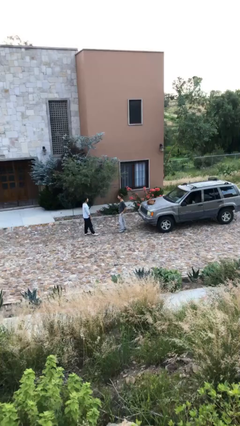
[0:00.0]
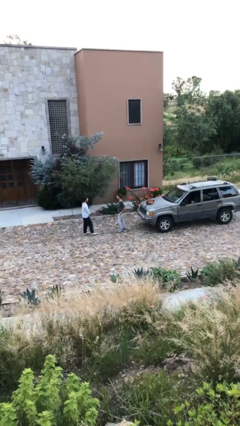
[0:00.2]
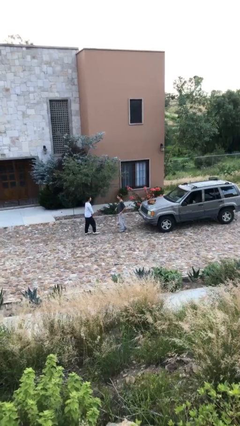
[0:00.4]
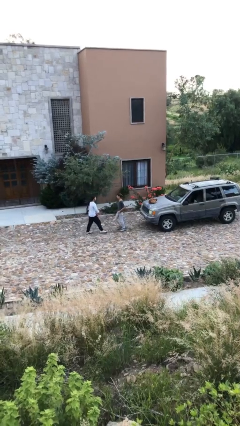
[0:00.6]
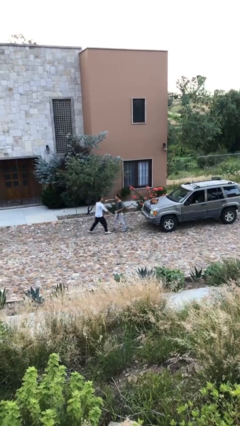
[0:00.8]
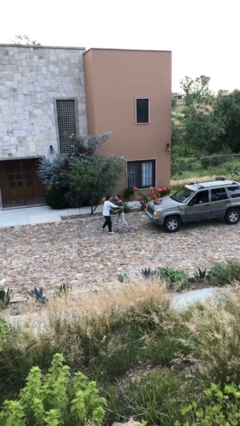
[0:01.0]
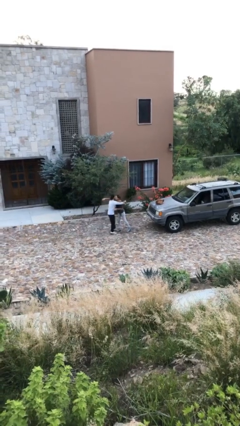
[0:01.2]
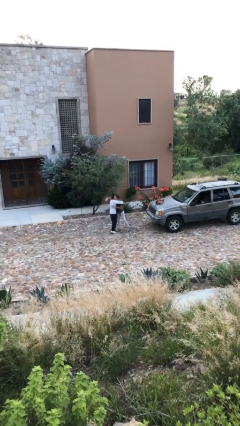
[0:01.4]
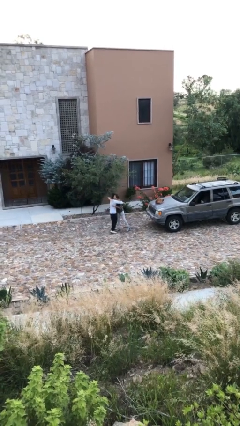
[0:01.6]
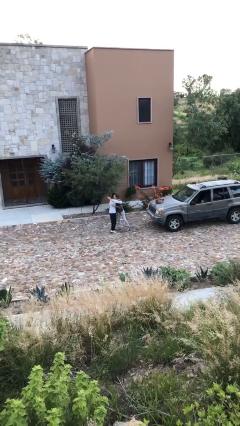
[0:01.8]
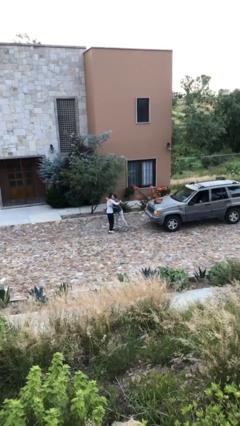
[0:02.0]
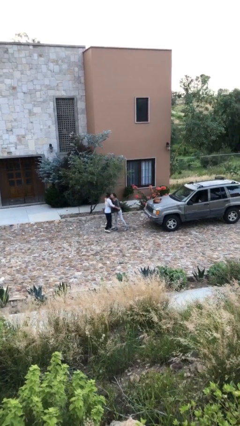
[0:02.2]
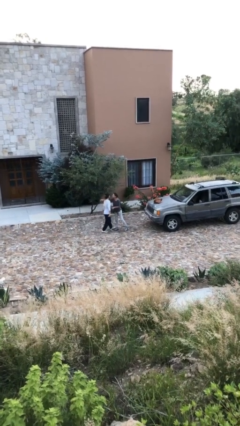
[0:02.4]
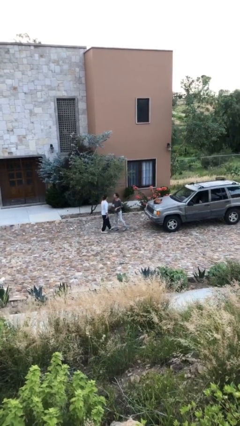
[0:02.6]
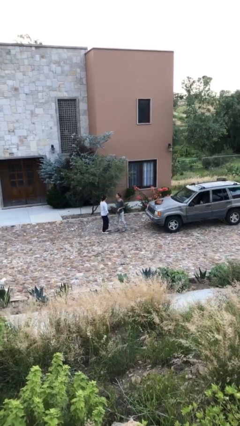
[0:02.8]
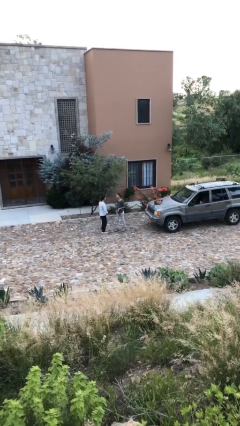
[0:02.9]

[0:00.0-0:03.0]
person embraces person

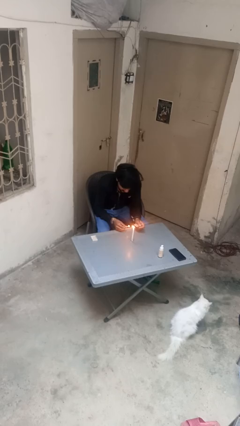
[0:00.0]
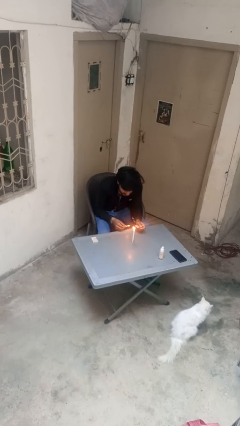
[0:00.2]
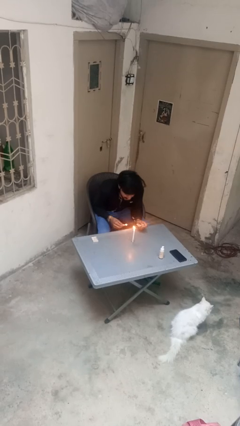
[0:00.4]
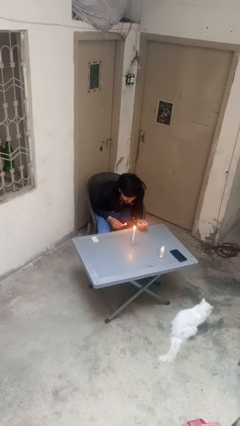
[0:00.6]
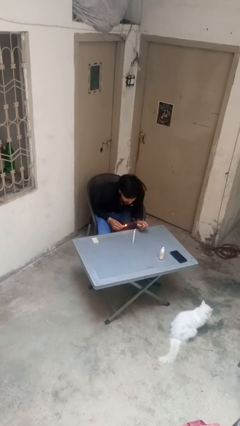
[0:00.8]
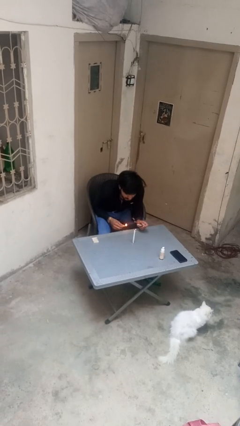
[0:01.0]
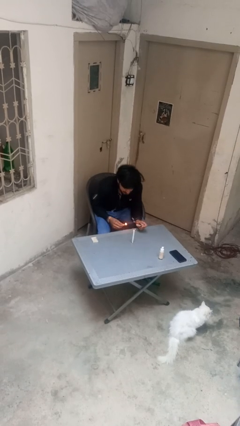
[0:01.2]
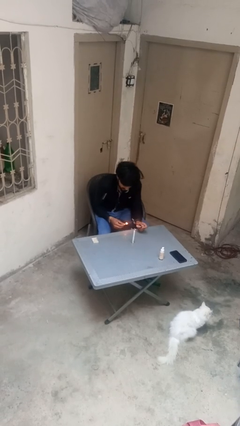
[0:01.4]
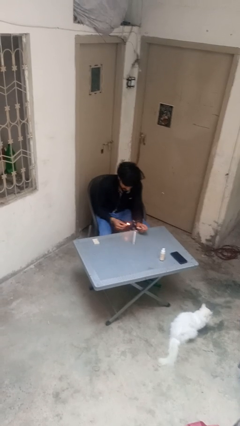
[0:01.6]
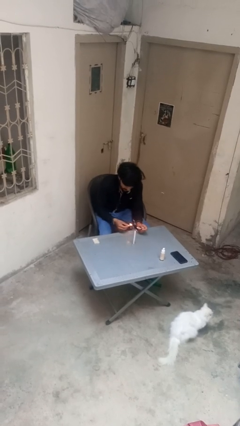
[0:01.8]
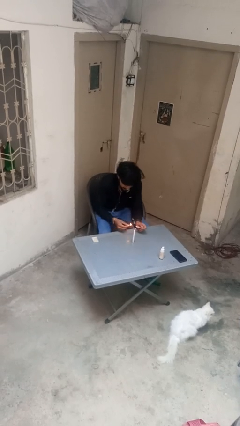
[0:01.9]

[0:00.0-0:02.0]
person extinguishes candle

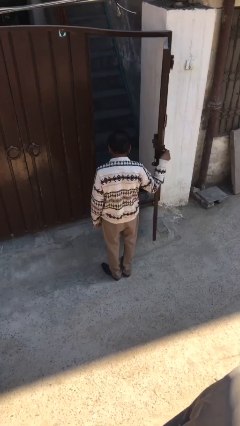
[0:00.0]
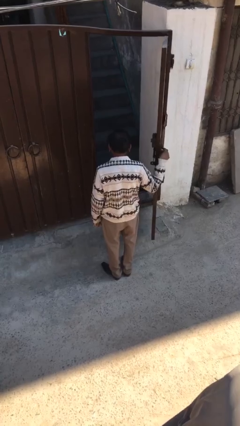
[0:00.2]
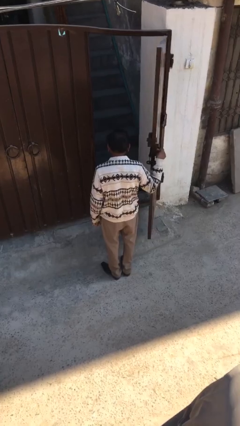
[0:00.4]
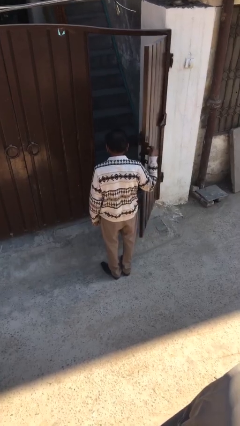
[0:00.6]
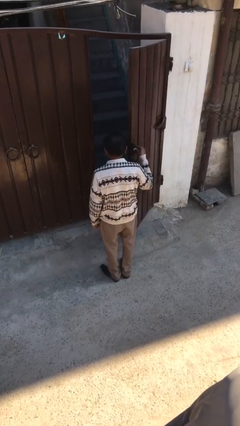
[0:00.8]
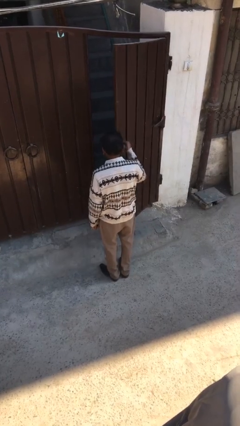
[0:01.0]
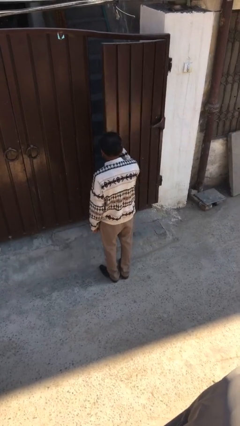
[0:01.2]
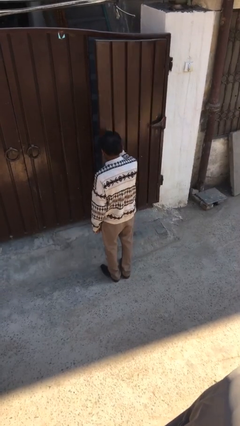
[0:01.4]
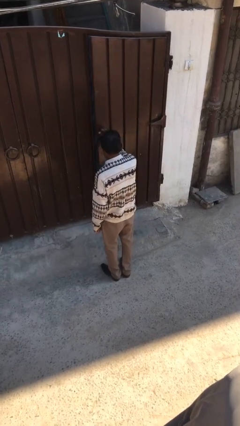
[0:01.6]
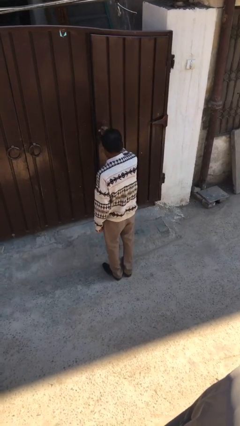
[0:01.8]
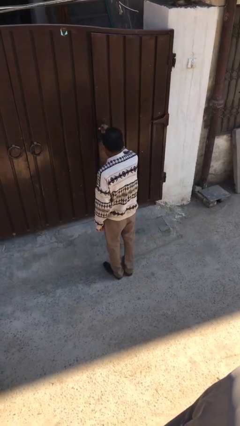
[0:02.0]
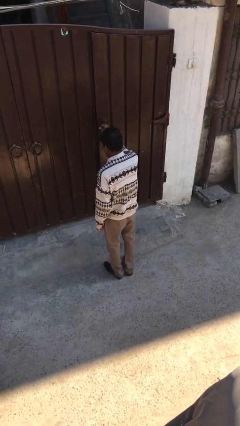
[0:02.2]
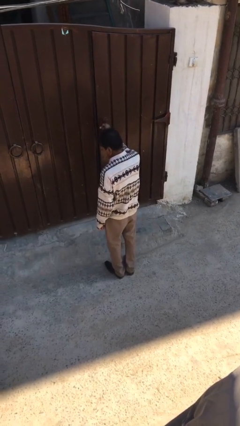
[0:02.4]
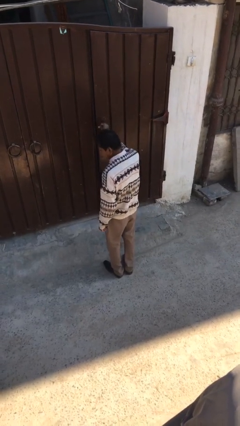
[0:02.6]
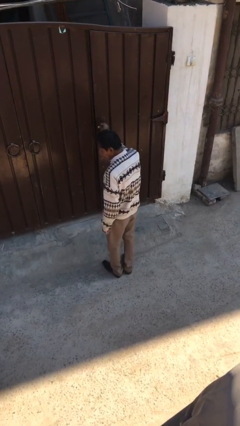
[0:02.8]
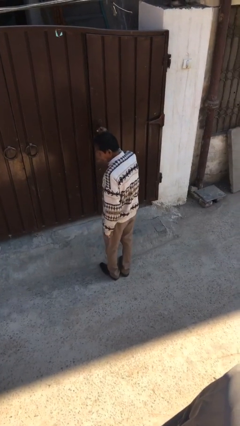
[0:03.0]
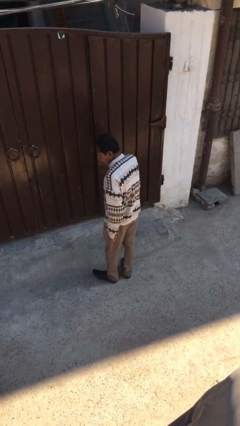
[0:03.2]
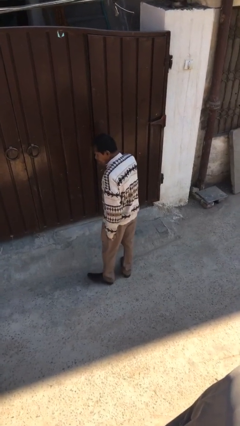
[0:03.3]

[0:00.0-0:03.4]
person closes facility door

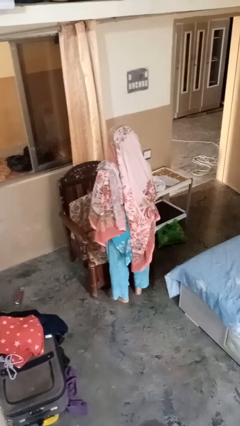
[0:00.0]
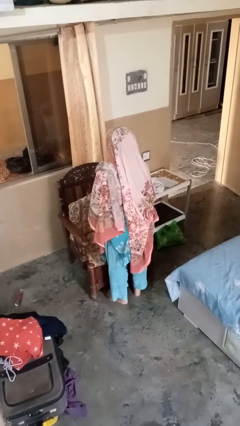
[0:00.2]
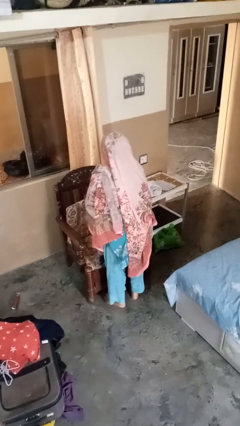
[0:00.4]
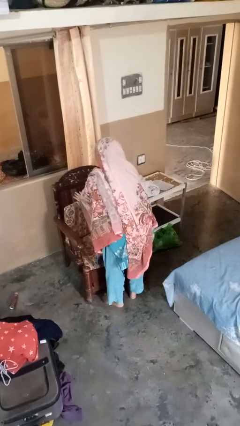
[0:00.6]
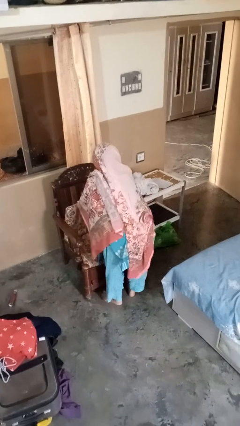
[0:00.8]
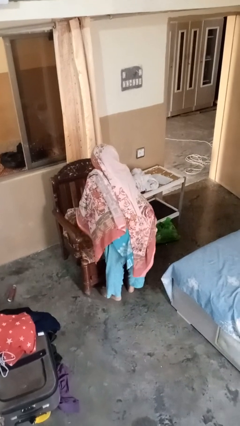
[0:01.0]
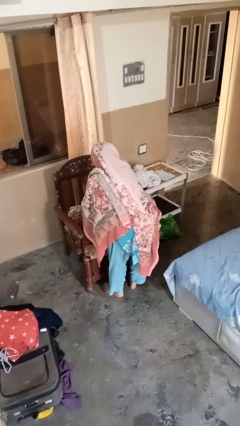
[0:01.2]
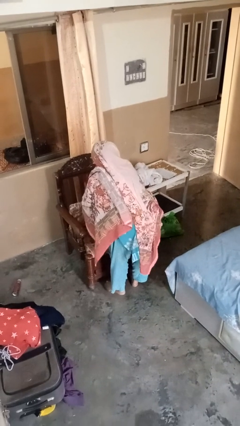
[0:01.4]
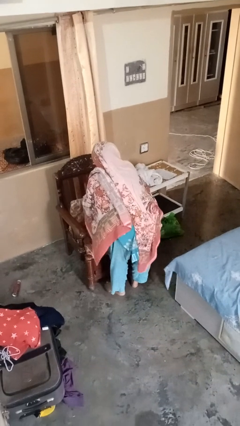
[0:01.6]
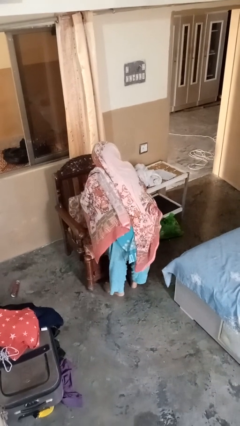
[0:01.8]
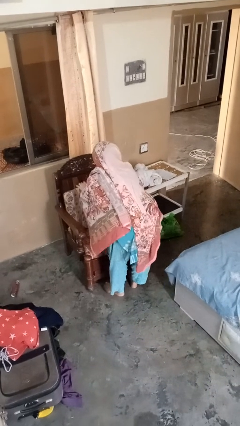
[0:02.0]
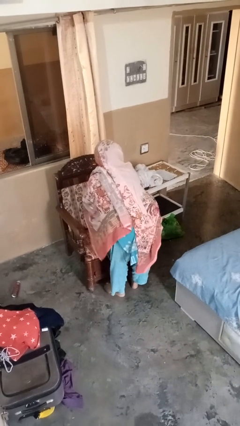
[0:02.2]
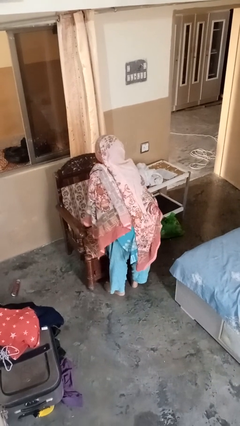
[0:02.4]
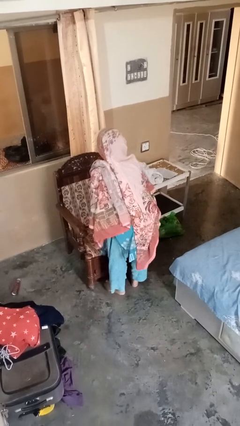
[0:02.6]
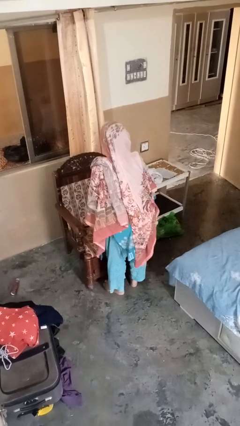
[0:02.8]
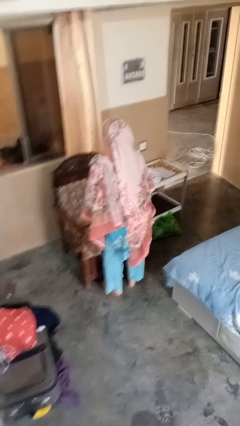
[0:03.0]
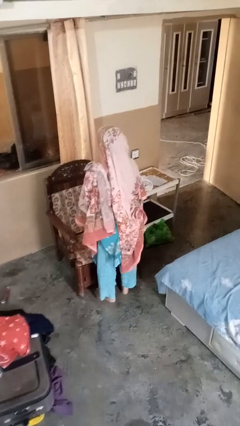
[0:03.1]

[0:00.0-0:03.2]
person searches in couch

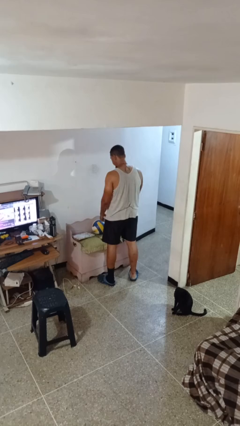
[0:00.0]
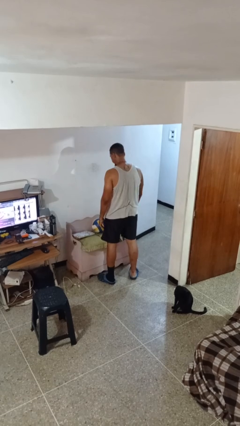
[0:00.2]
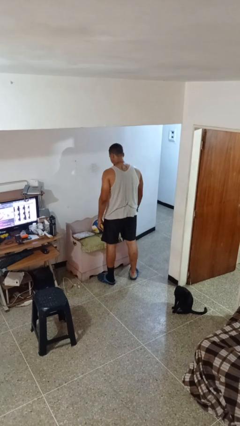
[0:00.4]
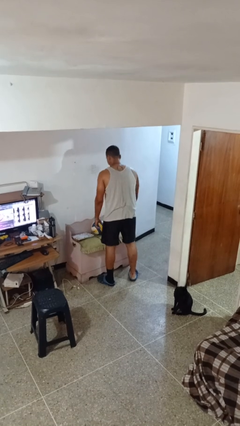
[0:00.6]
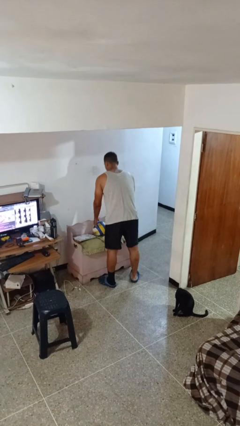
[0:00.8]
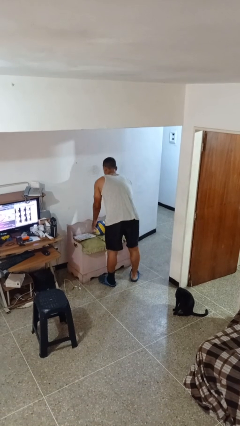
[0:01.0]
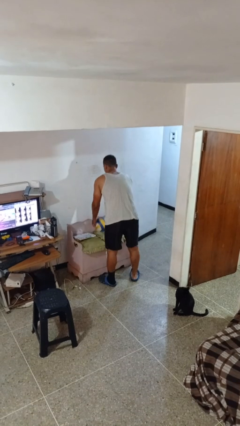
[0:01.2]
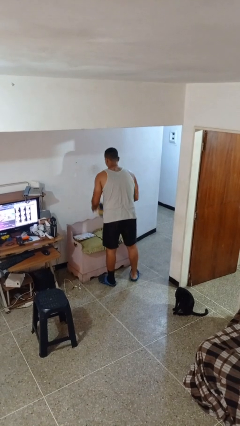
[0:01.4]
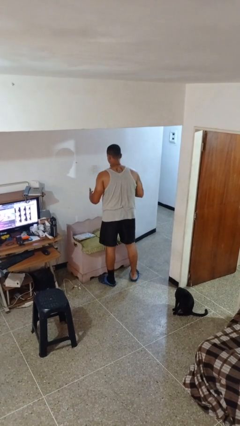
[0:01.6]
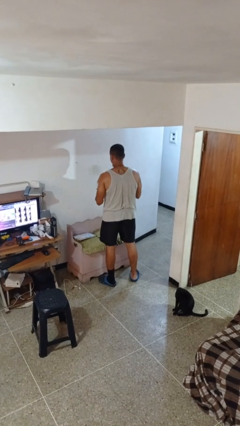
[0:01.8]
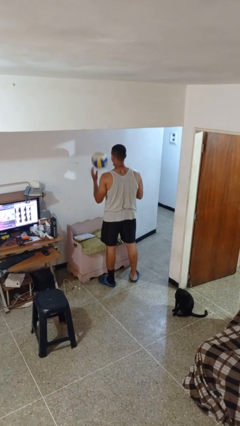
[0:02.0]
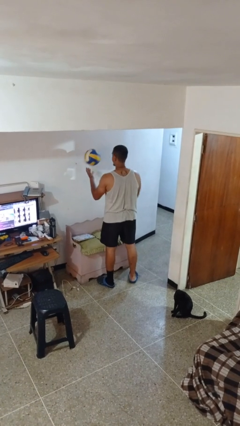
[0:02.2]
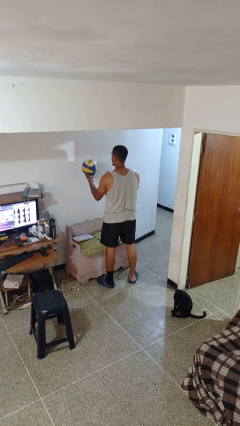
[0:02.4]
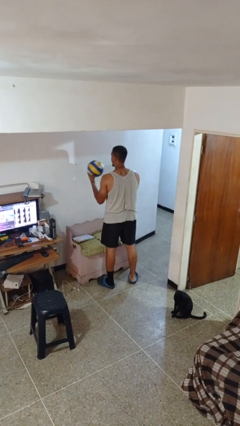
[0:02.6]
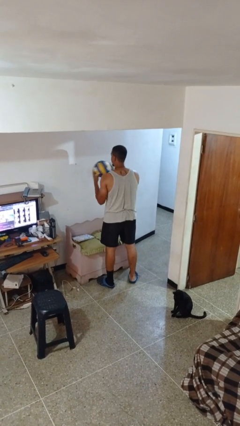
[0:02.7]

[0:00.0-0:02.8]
person picks up object from couch

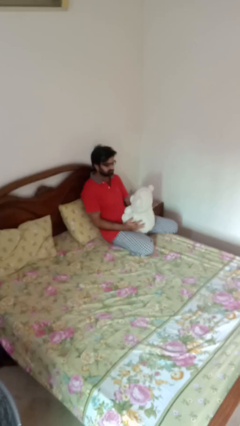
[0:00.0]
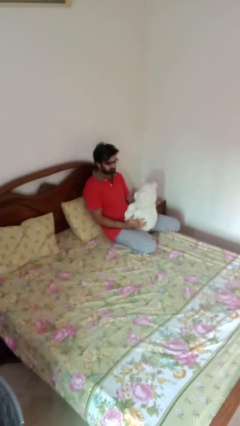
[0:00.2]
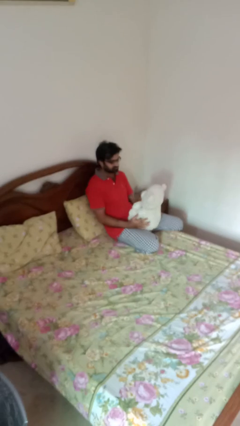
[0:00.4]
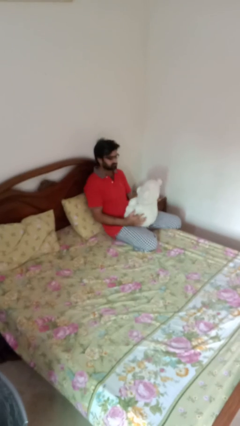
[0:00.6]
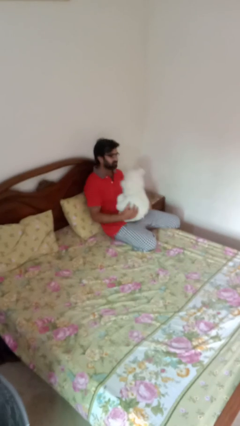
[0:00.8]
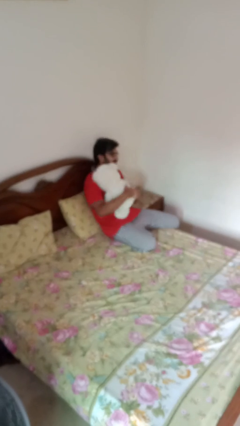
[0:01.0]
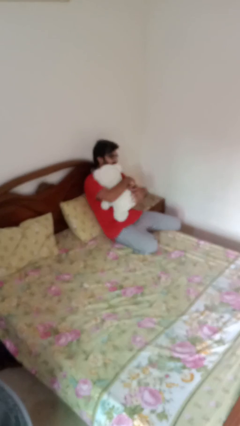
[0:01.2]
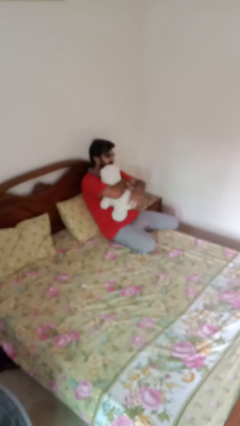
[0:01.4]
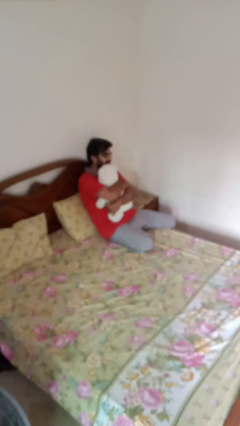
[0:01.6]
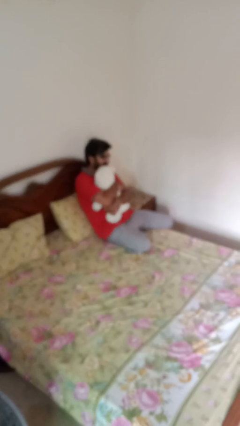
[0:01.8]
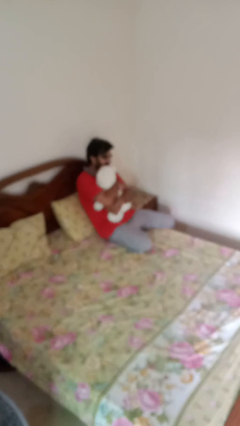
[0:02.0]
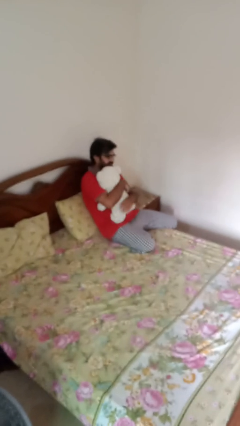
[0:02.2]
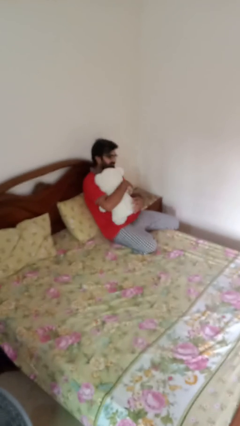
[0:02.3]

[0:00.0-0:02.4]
person hugs stuffed animal

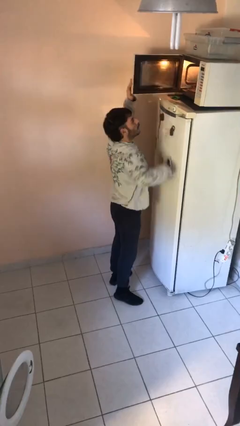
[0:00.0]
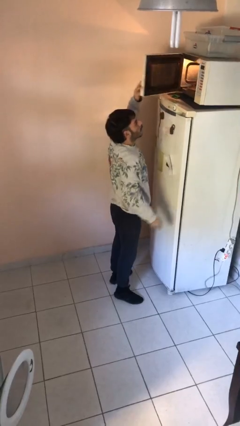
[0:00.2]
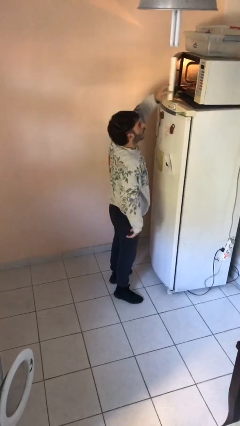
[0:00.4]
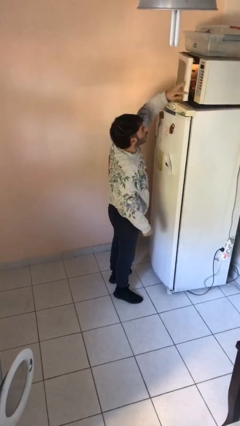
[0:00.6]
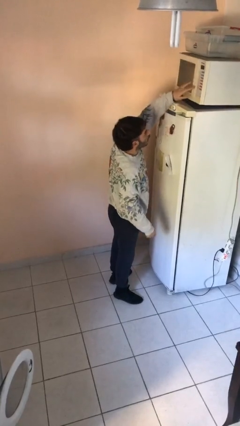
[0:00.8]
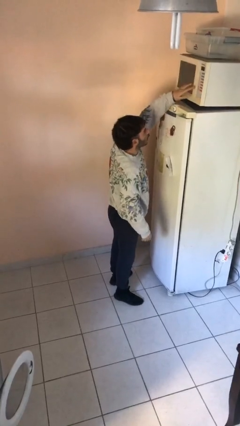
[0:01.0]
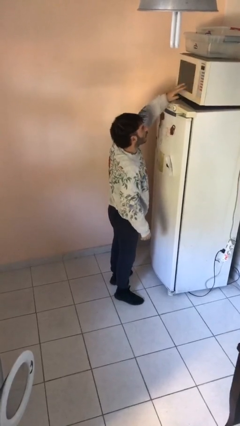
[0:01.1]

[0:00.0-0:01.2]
person closes microwave
